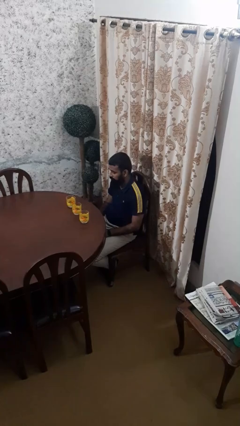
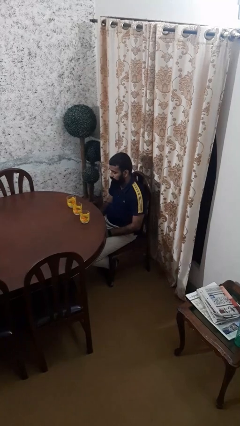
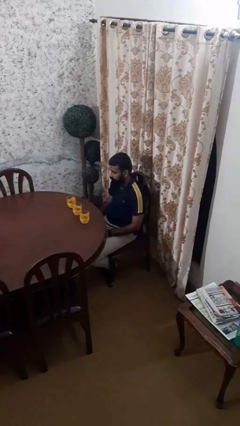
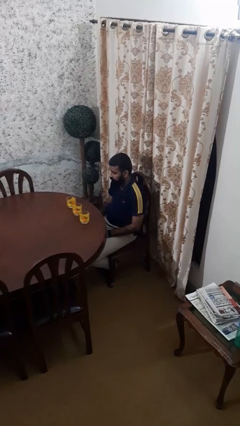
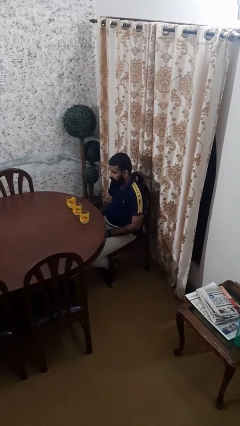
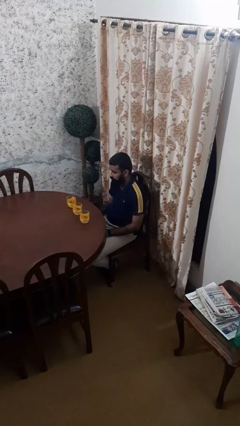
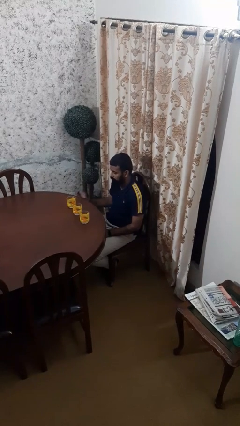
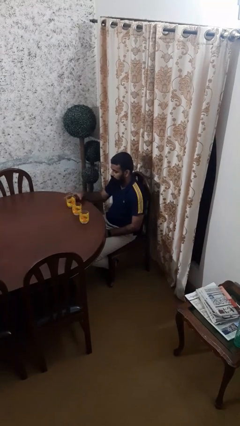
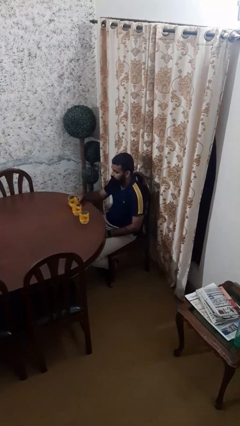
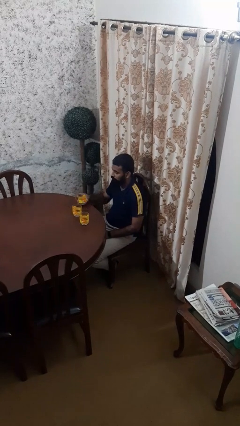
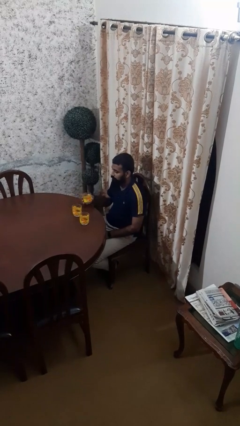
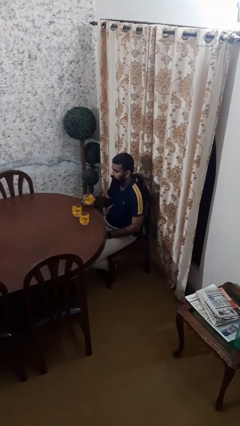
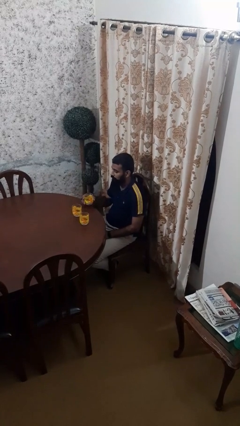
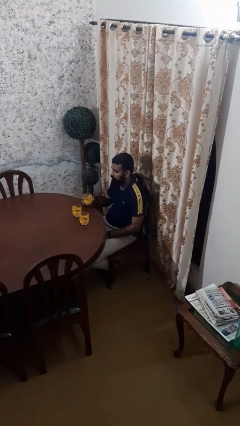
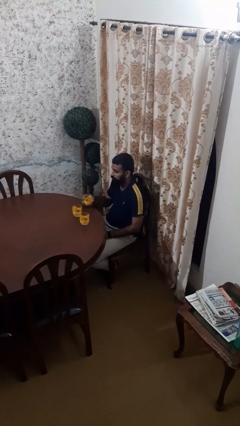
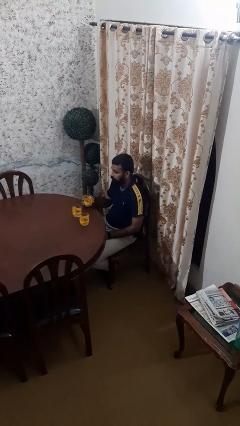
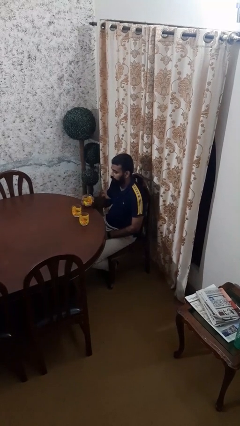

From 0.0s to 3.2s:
person picks up object from table

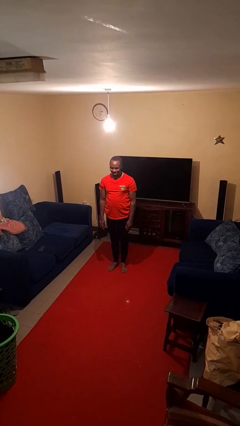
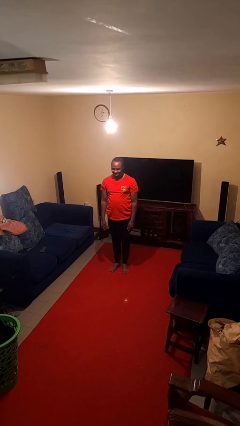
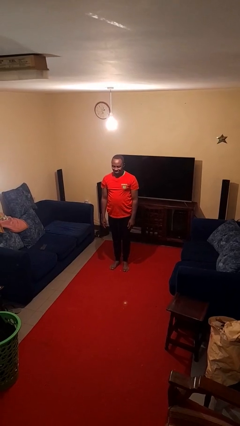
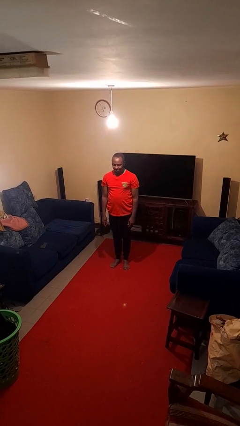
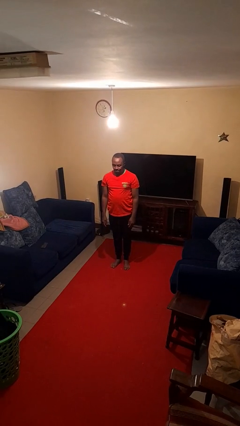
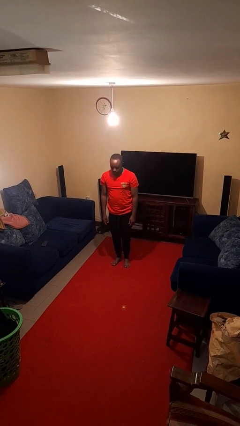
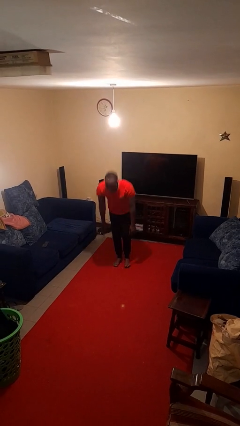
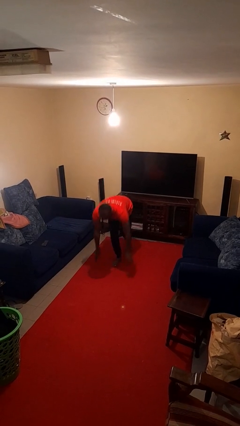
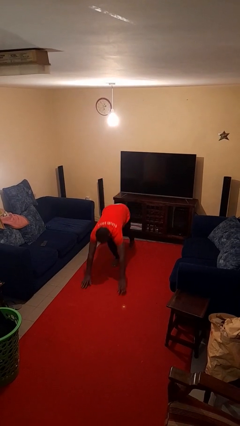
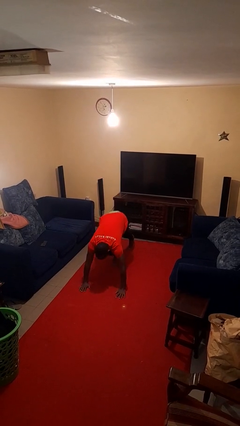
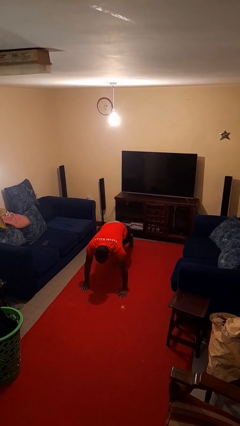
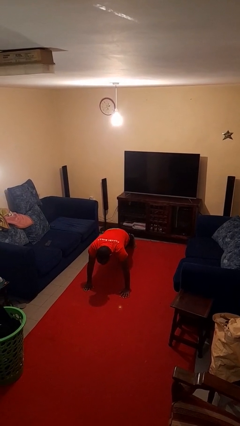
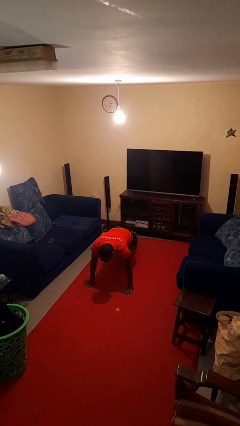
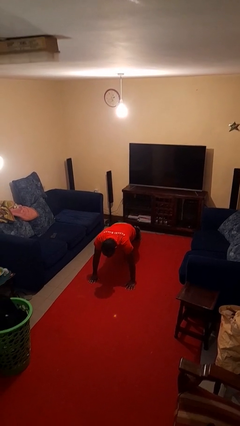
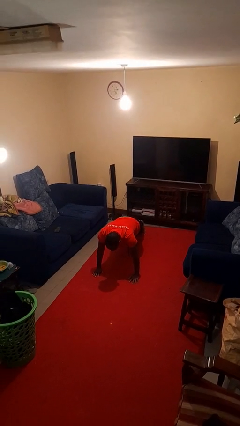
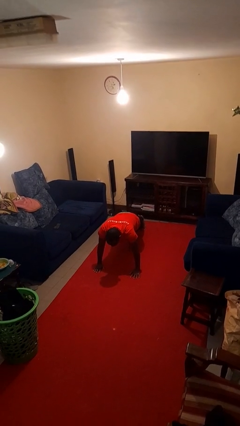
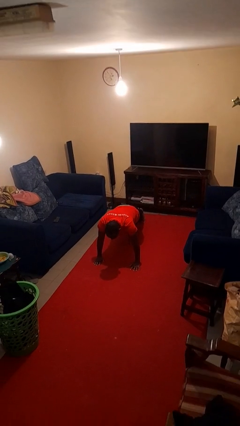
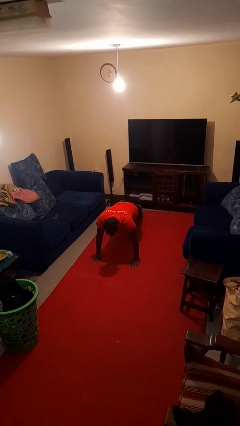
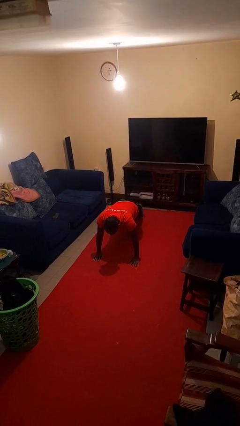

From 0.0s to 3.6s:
person exercises with plank

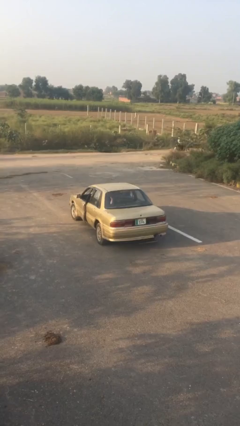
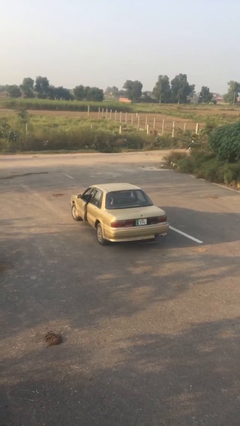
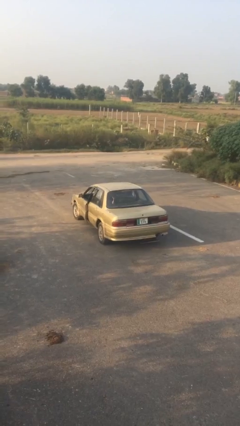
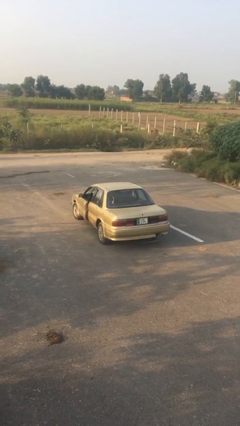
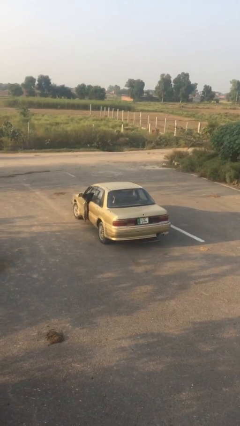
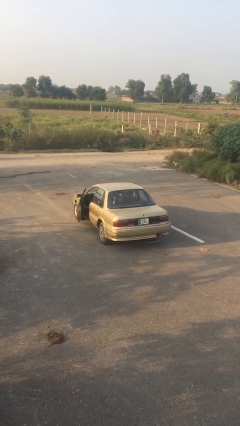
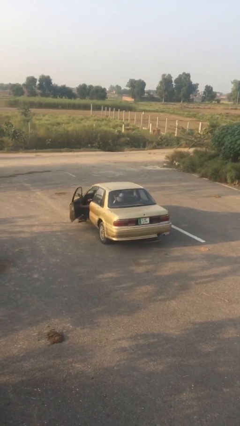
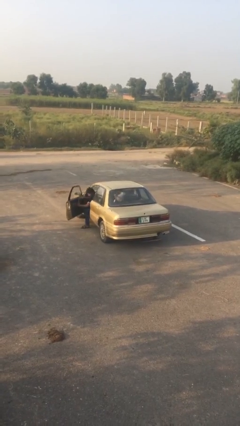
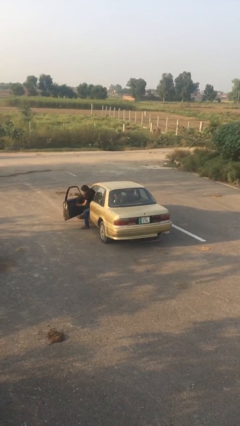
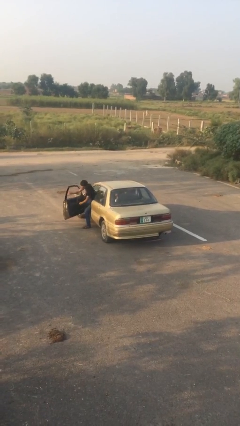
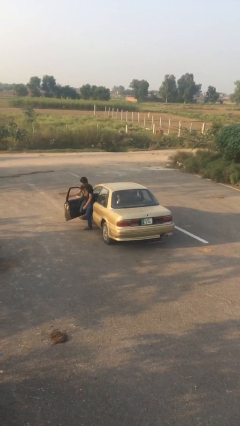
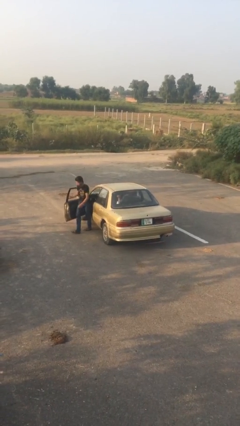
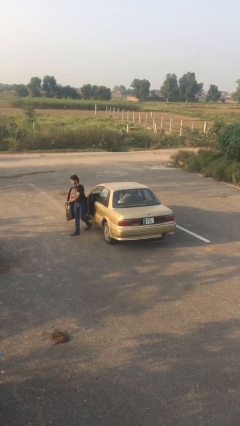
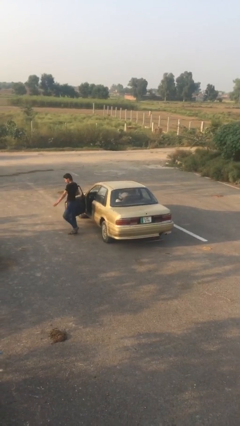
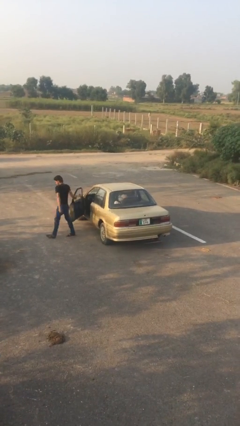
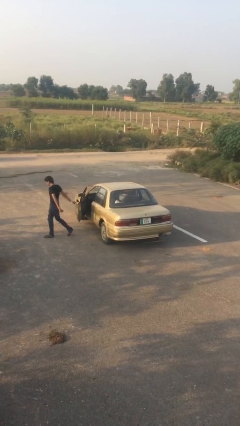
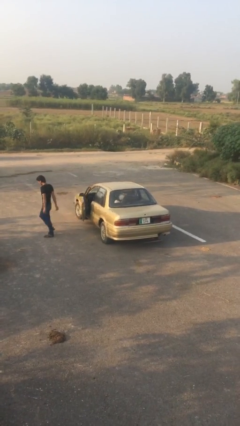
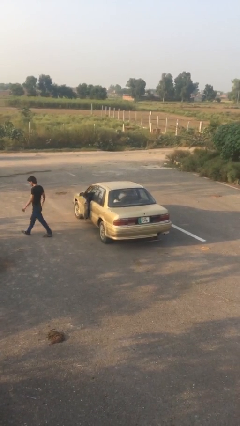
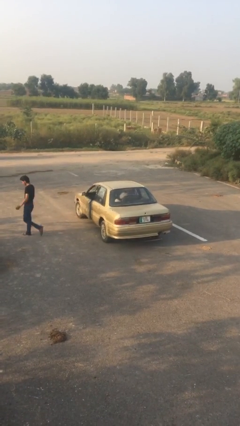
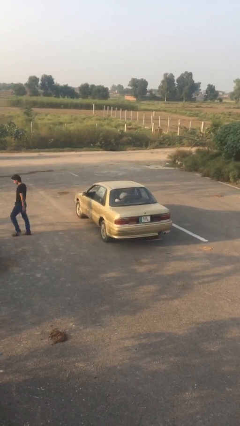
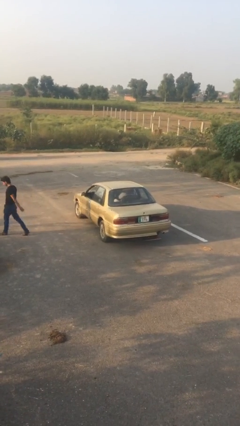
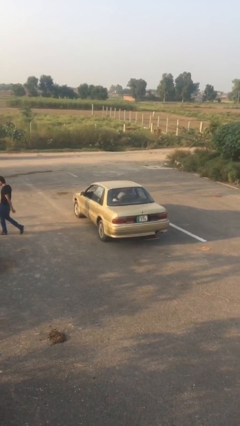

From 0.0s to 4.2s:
car drops off person

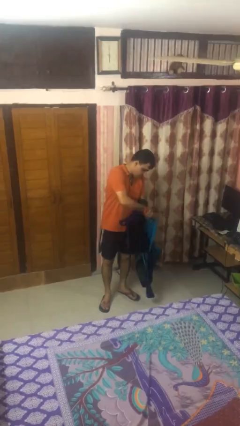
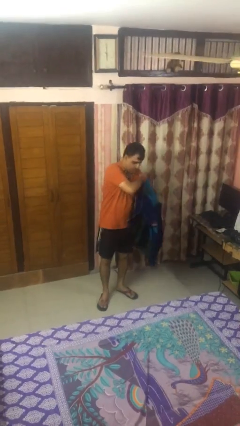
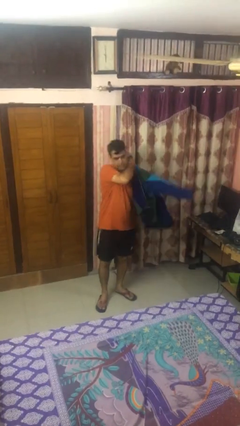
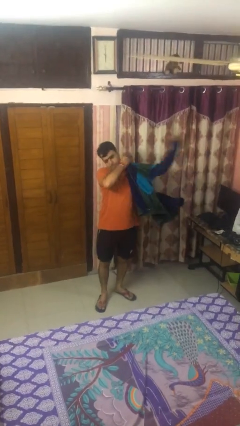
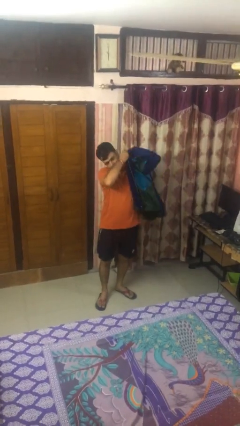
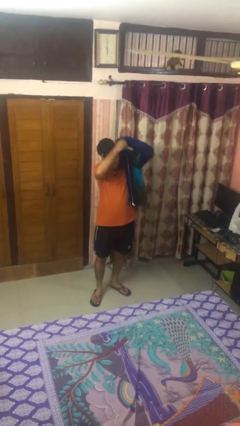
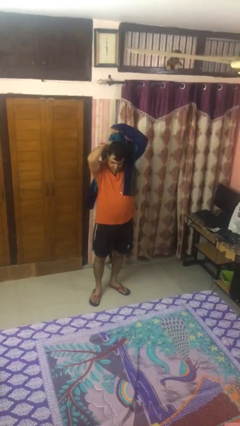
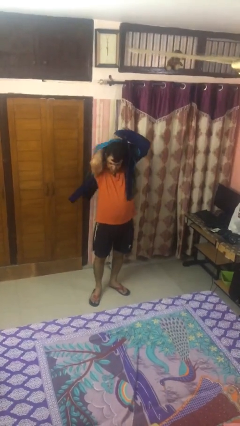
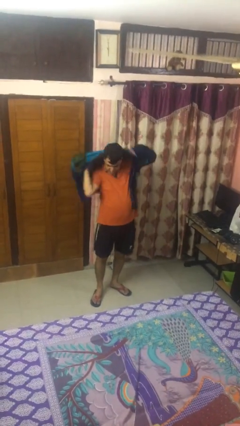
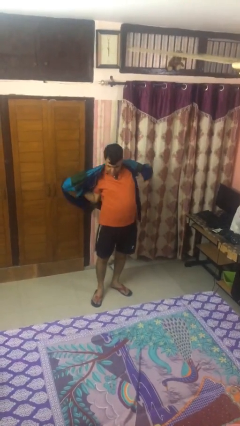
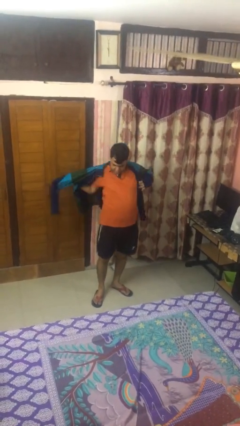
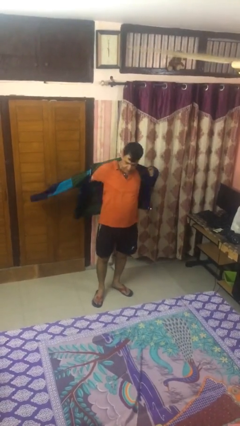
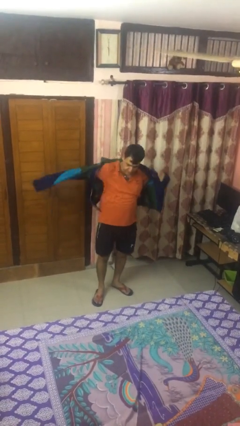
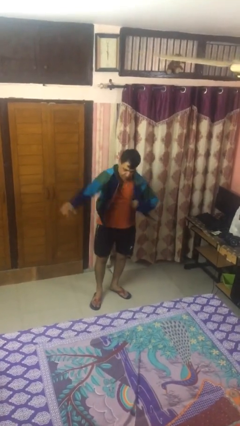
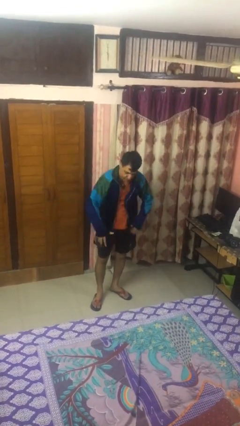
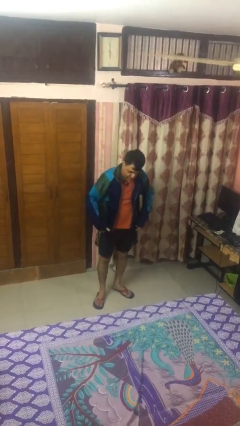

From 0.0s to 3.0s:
person puts on jacket

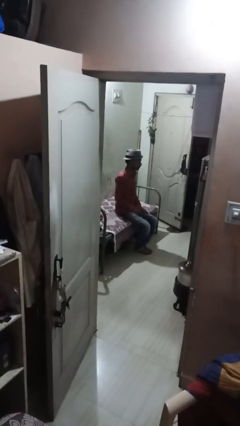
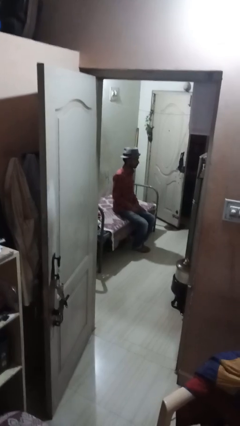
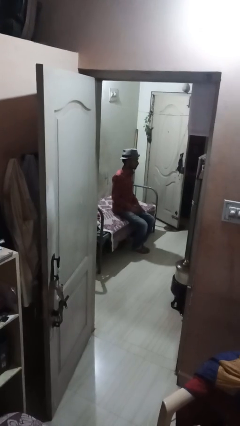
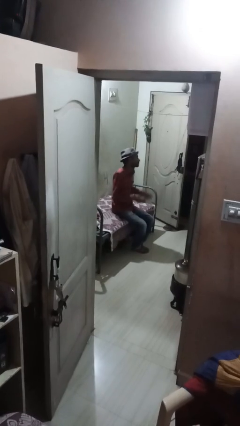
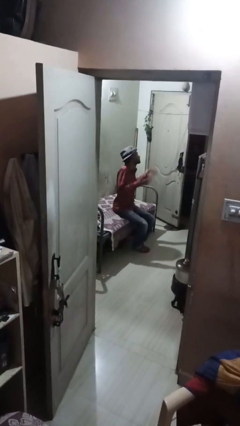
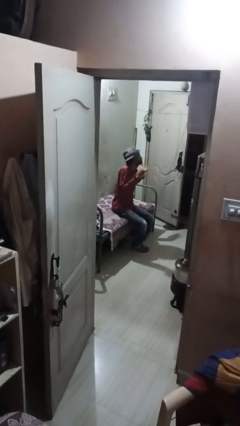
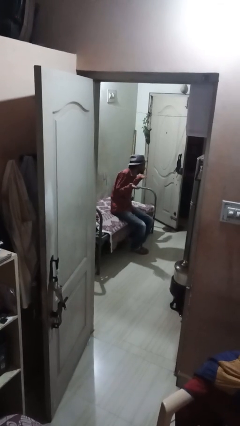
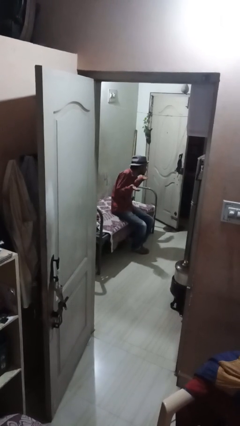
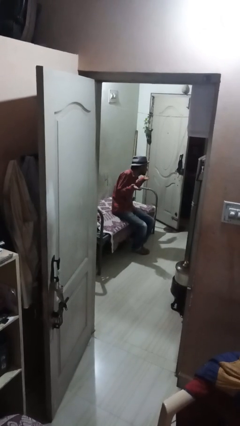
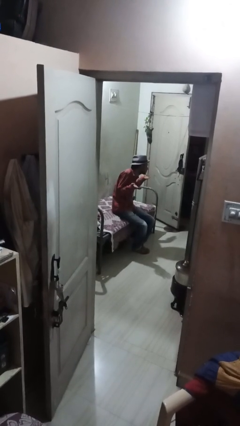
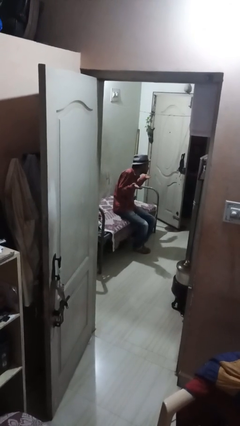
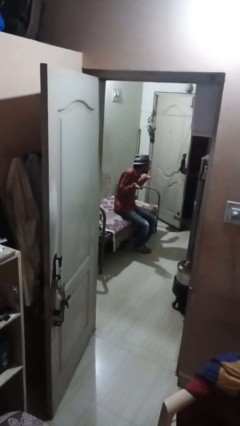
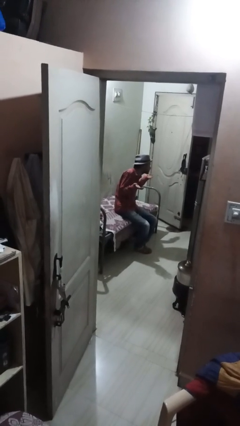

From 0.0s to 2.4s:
person shrugs

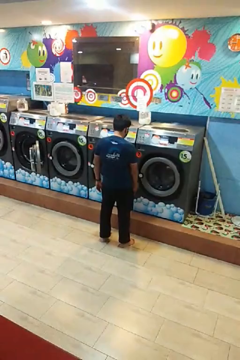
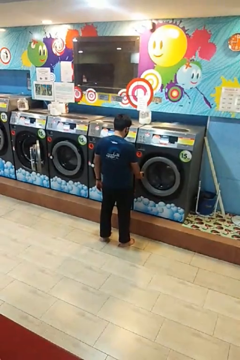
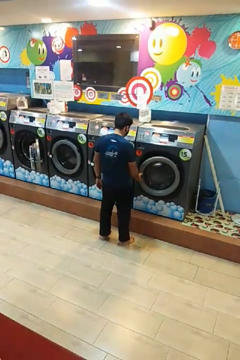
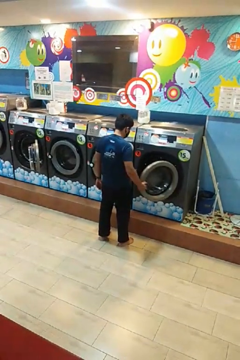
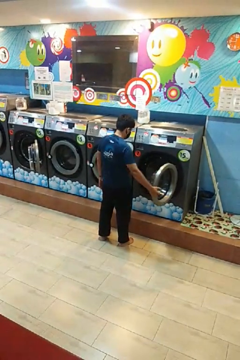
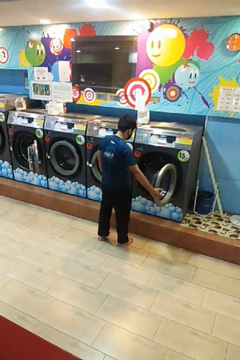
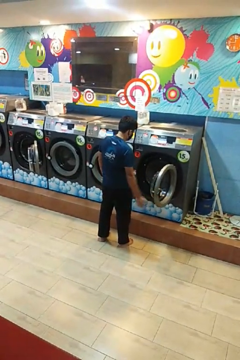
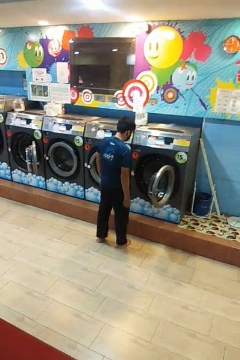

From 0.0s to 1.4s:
person opens clothes washer
